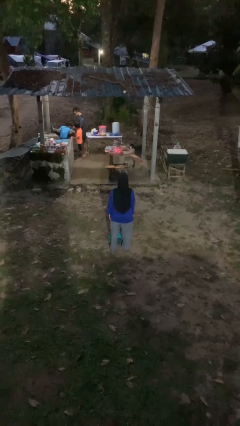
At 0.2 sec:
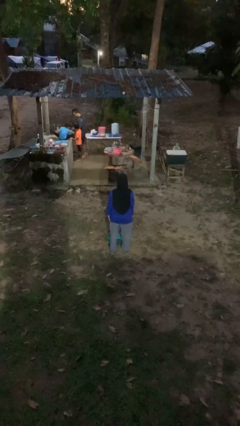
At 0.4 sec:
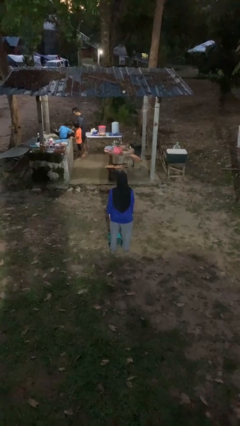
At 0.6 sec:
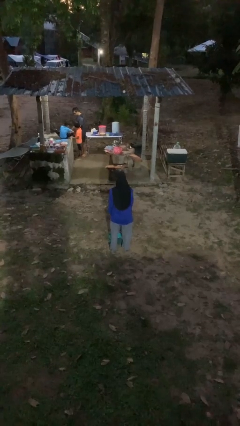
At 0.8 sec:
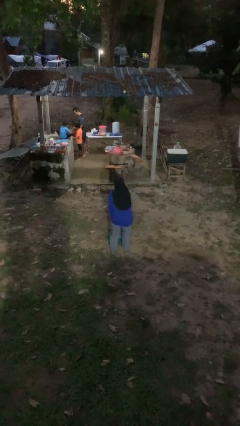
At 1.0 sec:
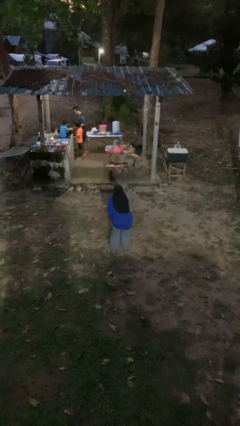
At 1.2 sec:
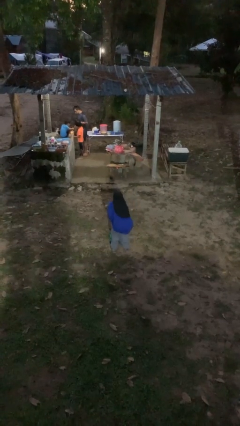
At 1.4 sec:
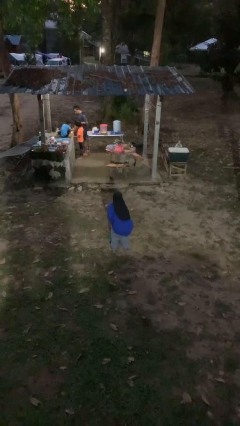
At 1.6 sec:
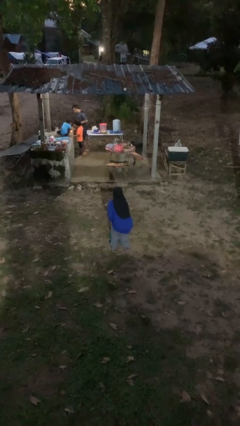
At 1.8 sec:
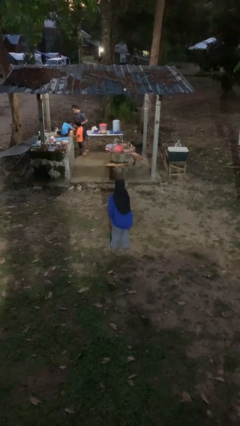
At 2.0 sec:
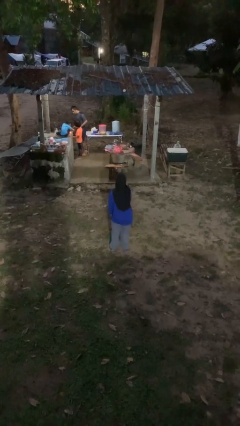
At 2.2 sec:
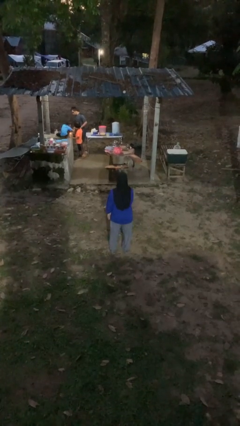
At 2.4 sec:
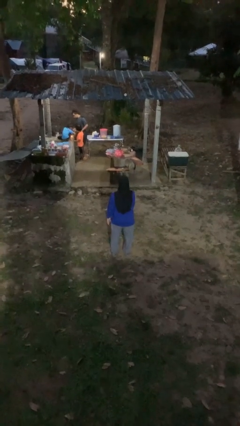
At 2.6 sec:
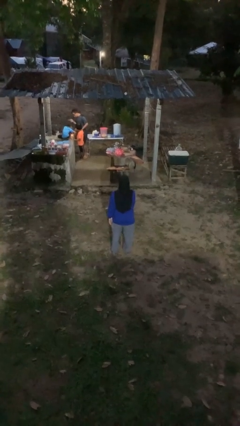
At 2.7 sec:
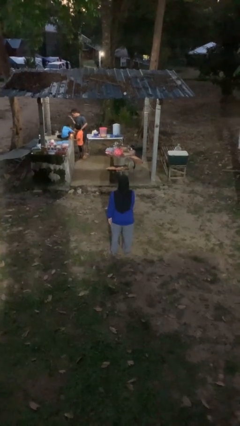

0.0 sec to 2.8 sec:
person picks up object from floor

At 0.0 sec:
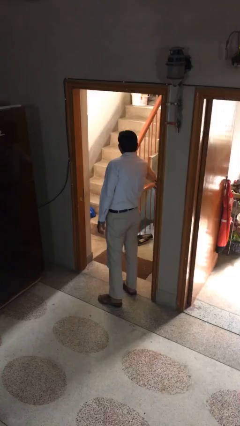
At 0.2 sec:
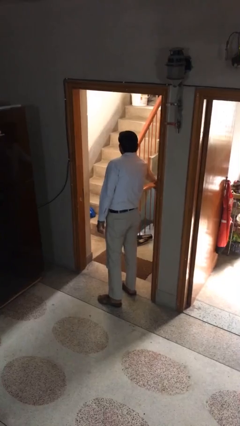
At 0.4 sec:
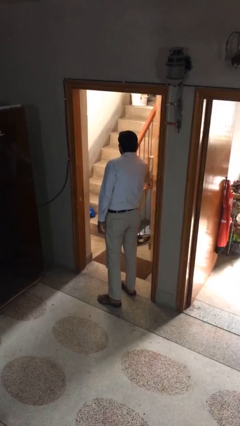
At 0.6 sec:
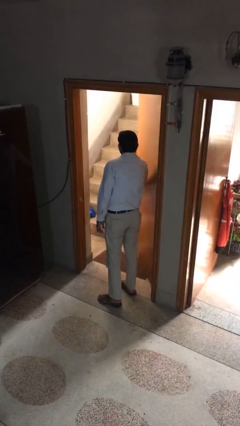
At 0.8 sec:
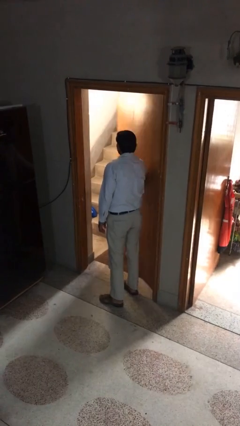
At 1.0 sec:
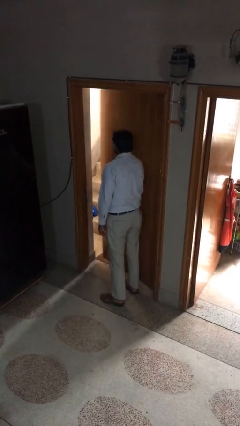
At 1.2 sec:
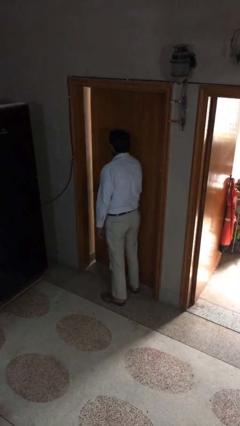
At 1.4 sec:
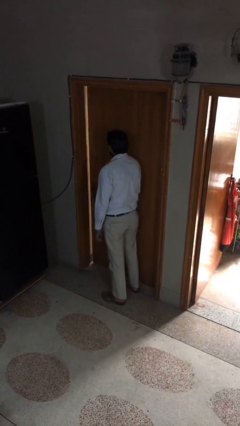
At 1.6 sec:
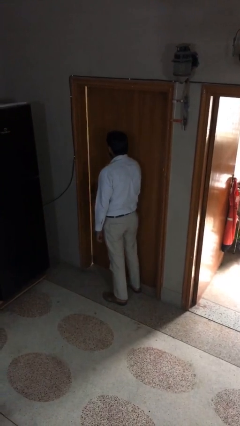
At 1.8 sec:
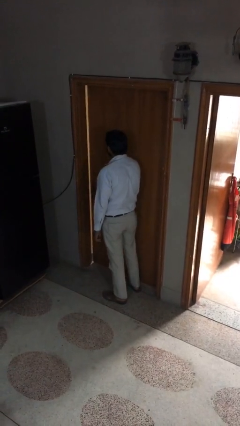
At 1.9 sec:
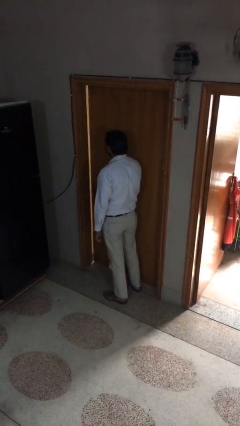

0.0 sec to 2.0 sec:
person closes facility door

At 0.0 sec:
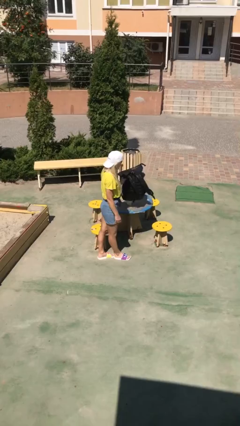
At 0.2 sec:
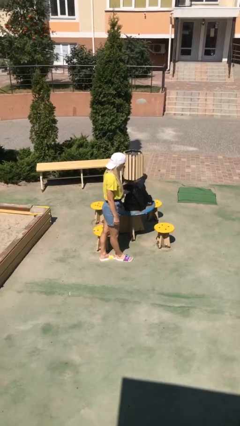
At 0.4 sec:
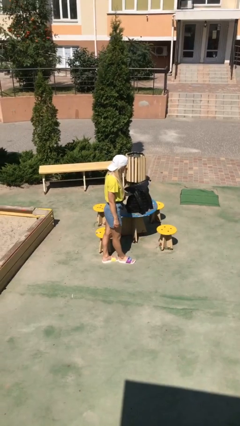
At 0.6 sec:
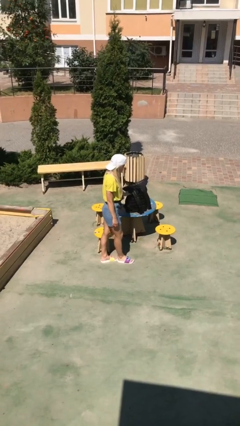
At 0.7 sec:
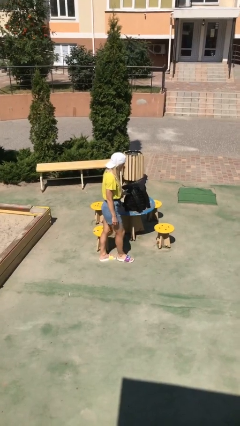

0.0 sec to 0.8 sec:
person puts down object on table

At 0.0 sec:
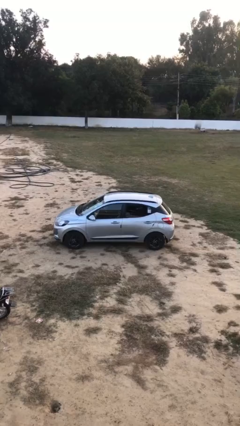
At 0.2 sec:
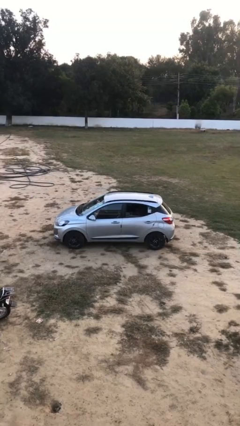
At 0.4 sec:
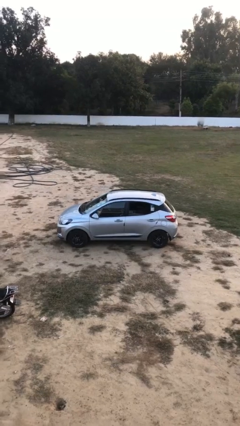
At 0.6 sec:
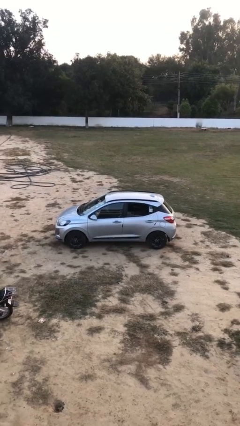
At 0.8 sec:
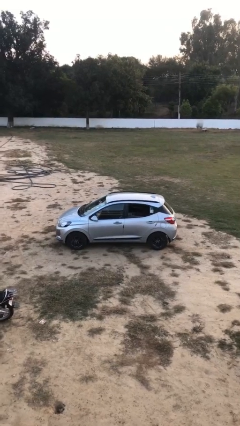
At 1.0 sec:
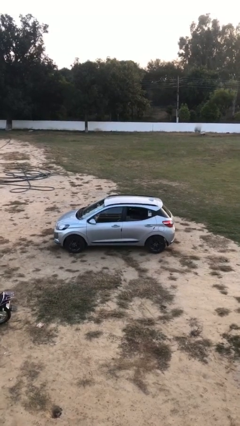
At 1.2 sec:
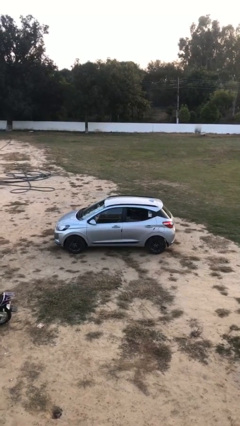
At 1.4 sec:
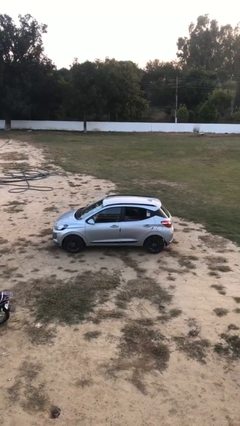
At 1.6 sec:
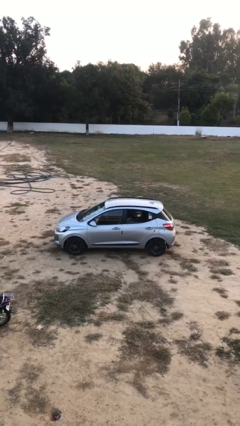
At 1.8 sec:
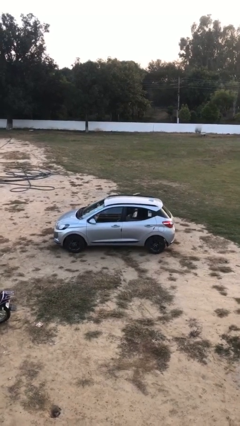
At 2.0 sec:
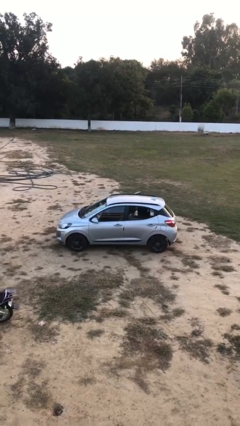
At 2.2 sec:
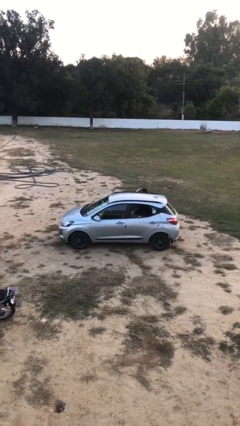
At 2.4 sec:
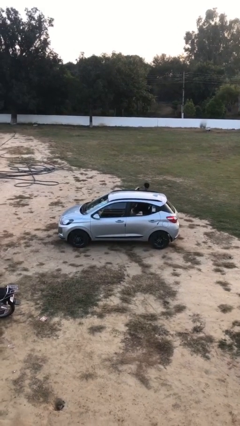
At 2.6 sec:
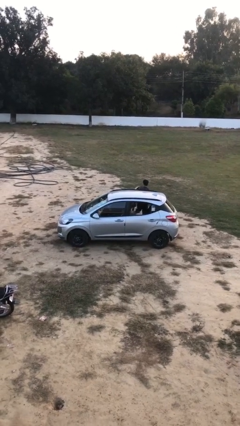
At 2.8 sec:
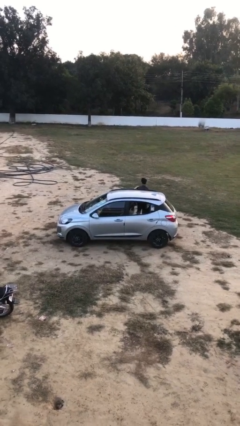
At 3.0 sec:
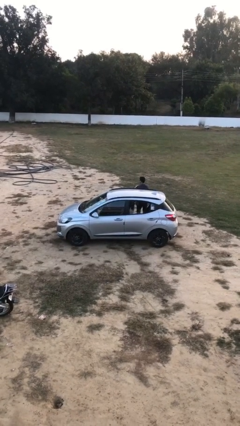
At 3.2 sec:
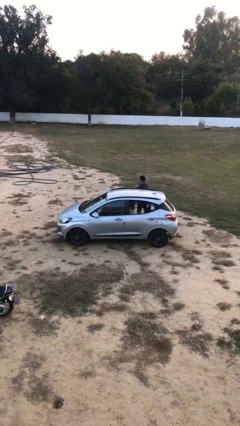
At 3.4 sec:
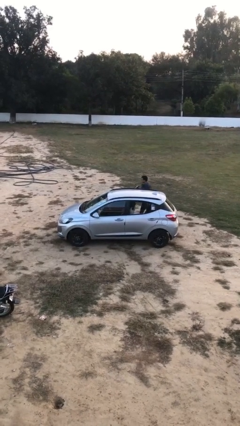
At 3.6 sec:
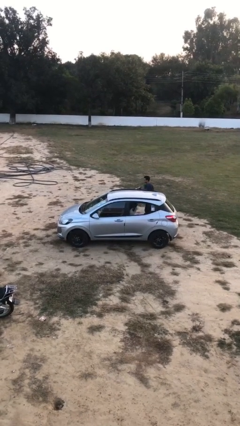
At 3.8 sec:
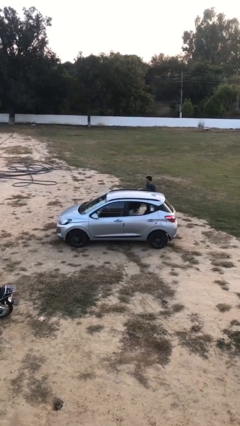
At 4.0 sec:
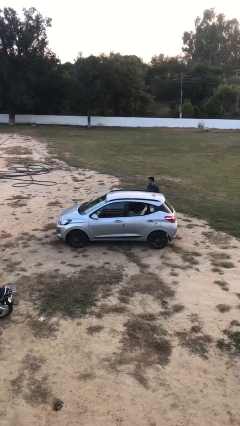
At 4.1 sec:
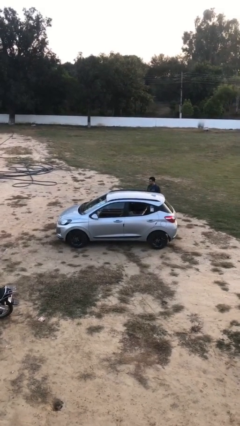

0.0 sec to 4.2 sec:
car drops off person

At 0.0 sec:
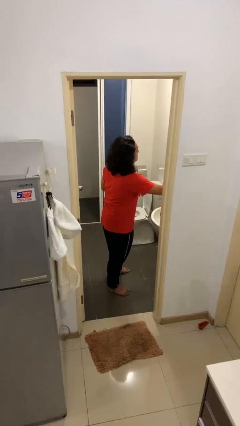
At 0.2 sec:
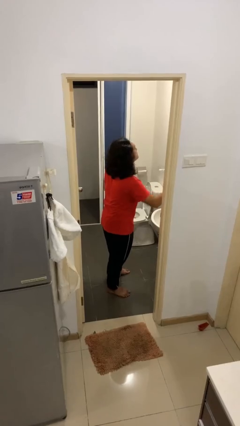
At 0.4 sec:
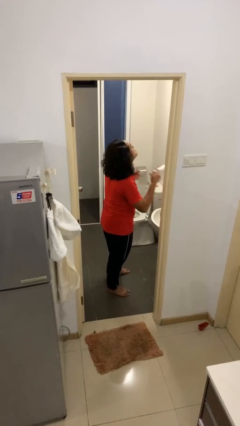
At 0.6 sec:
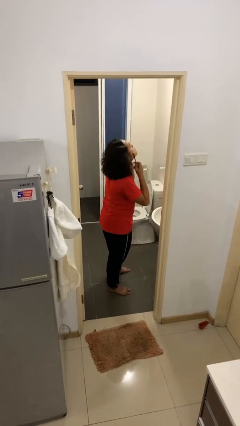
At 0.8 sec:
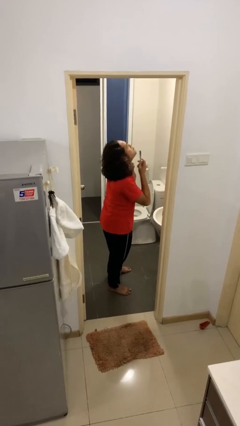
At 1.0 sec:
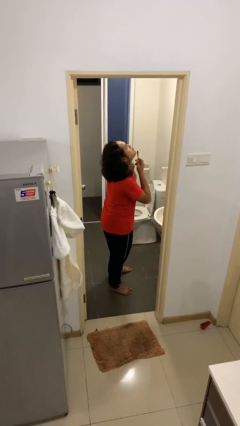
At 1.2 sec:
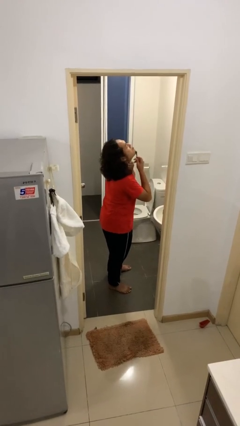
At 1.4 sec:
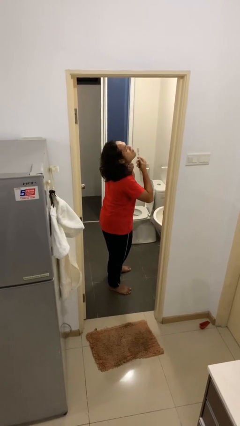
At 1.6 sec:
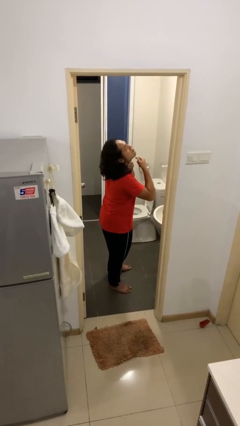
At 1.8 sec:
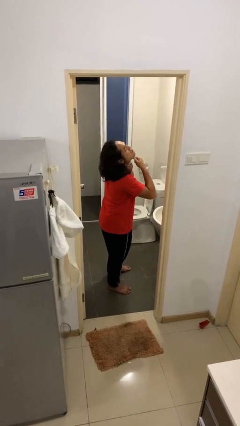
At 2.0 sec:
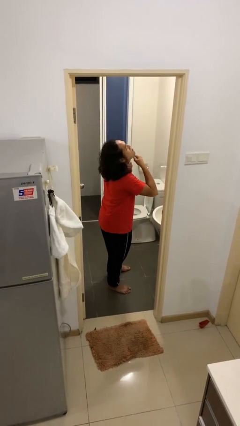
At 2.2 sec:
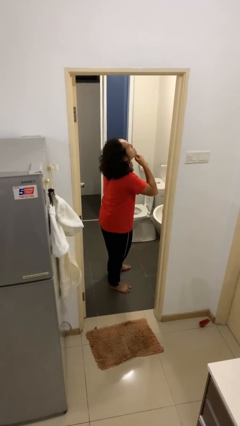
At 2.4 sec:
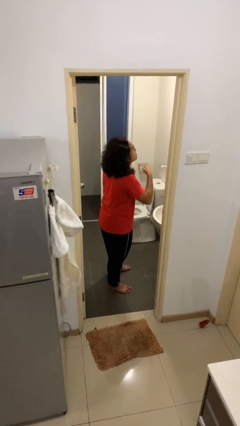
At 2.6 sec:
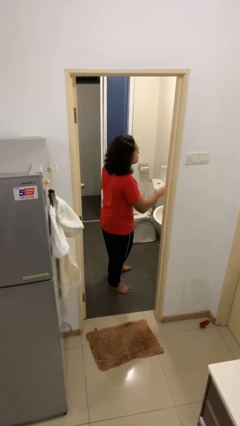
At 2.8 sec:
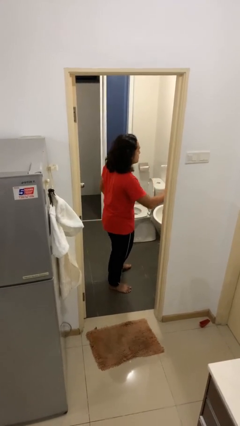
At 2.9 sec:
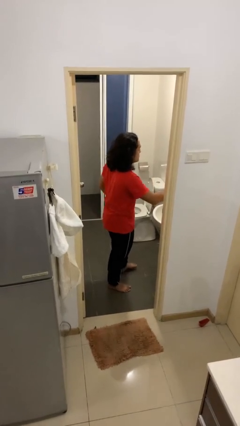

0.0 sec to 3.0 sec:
person shaves face

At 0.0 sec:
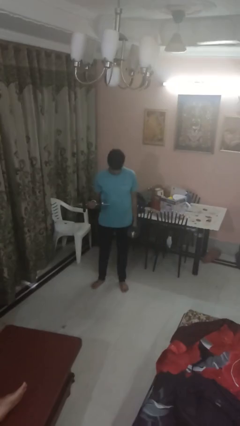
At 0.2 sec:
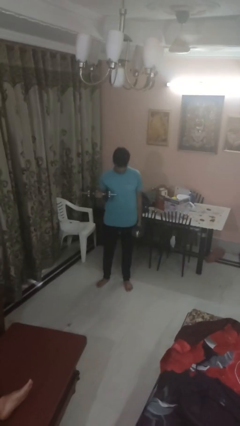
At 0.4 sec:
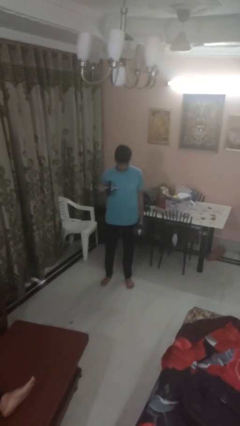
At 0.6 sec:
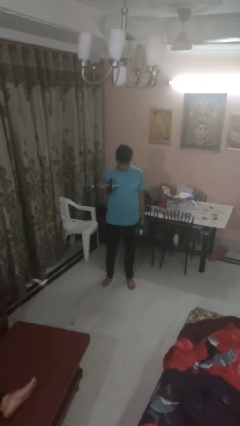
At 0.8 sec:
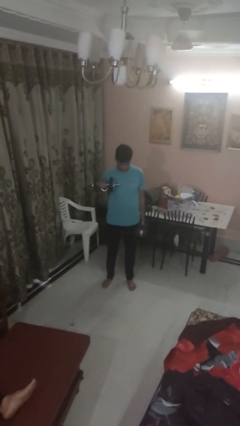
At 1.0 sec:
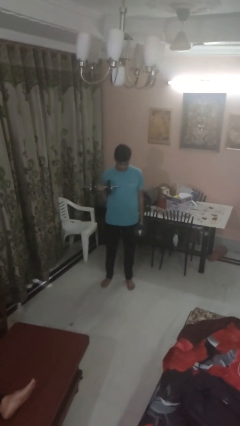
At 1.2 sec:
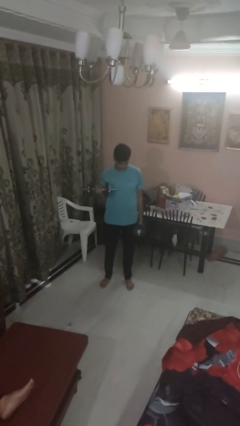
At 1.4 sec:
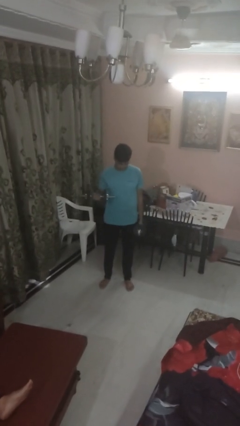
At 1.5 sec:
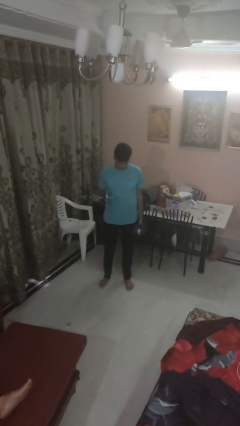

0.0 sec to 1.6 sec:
person lifts dumbbells

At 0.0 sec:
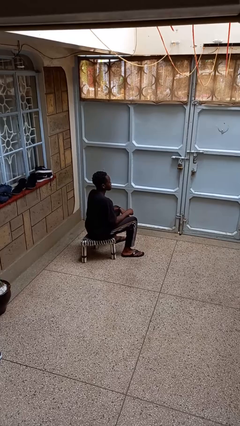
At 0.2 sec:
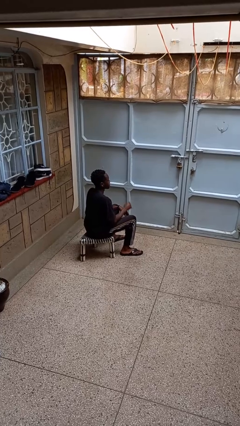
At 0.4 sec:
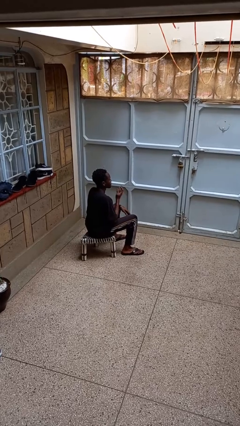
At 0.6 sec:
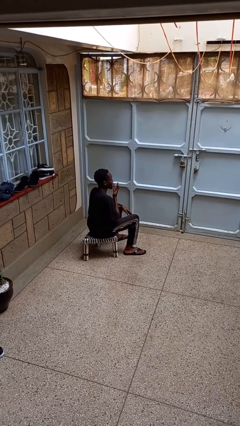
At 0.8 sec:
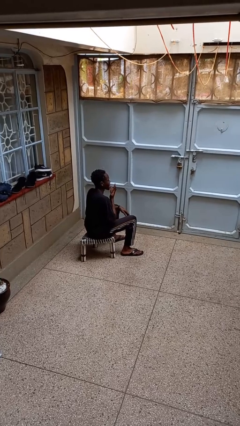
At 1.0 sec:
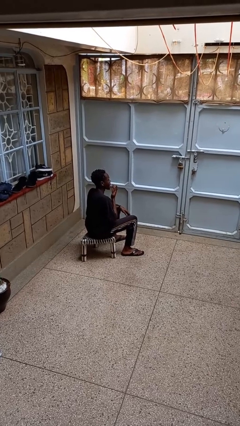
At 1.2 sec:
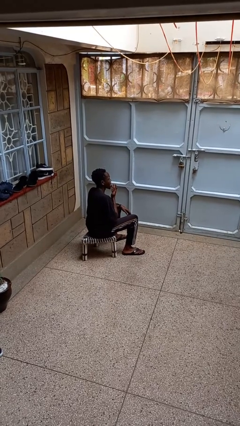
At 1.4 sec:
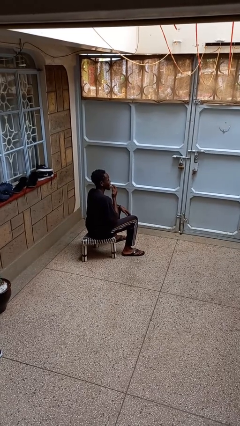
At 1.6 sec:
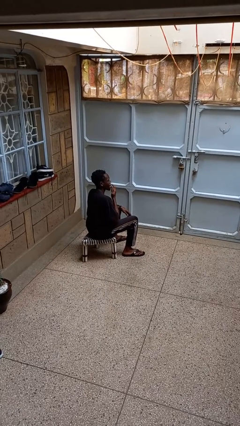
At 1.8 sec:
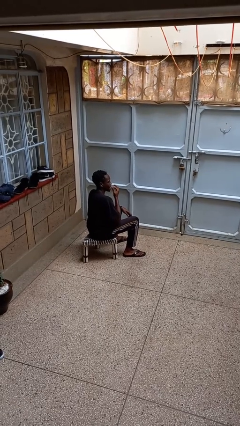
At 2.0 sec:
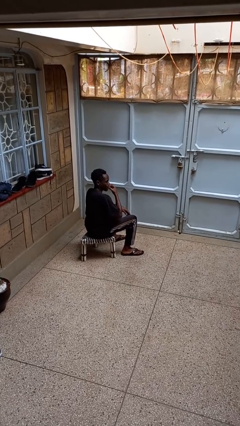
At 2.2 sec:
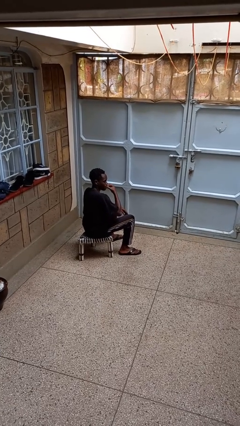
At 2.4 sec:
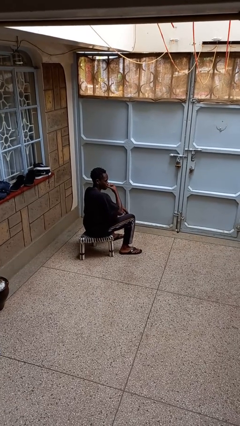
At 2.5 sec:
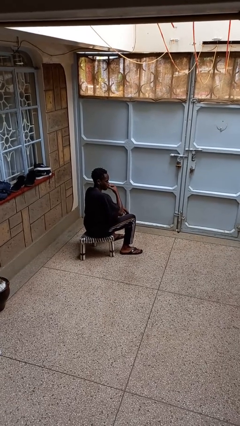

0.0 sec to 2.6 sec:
person licks fingers
